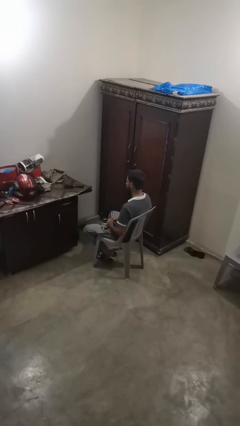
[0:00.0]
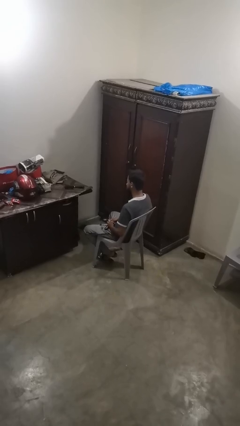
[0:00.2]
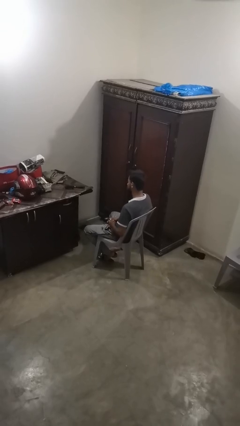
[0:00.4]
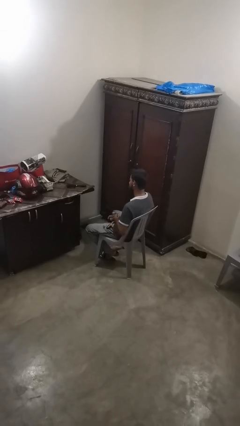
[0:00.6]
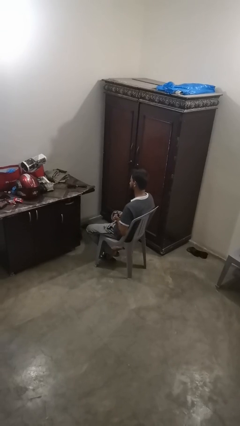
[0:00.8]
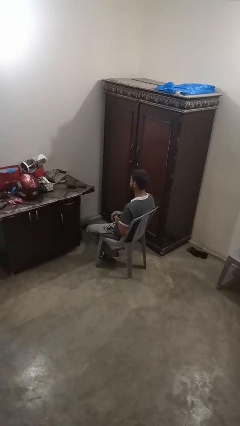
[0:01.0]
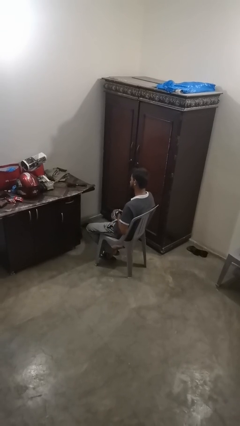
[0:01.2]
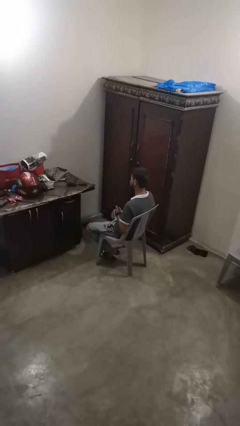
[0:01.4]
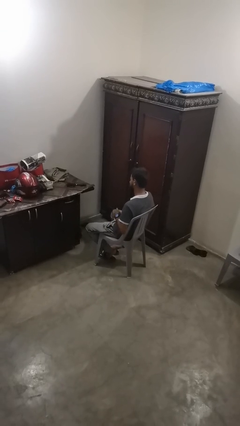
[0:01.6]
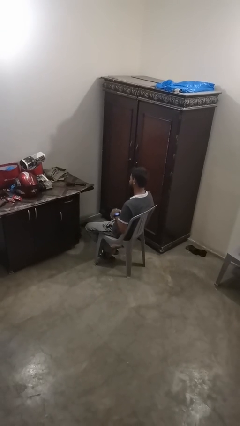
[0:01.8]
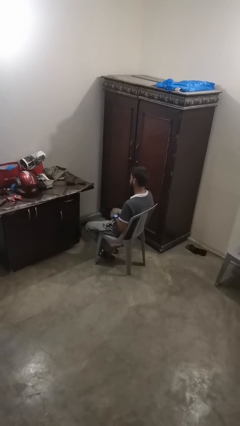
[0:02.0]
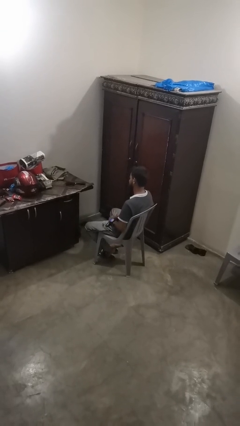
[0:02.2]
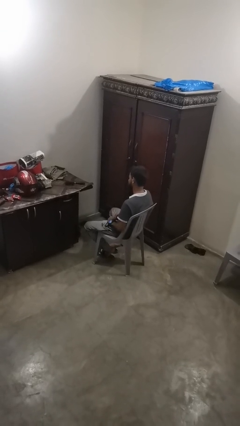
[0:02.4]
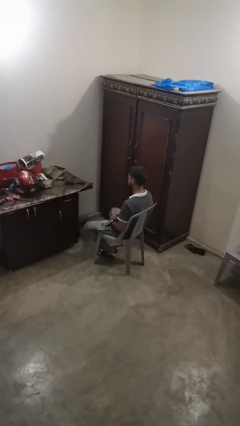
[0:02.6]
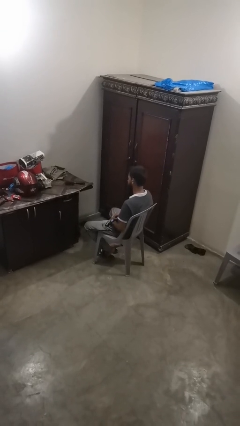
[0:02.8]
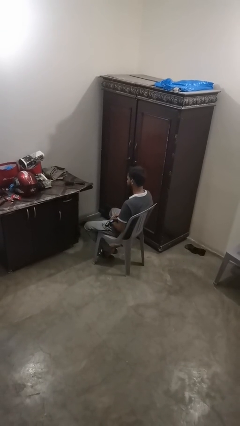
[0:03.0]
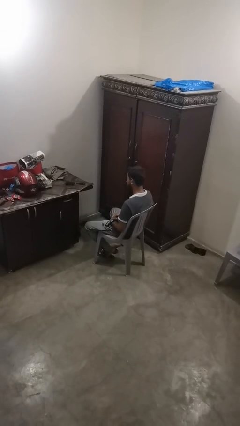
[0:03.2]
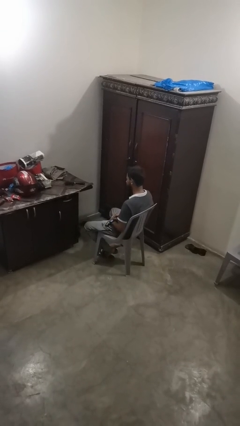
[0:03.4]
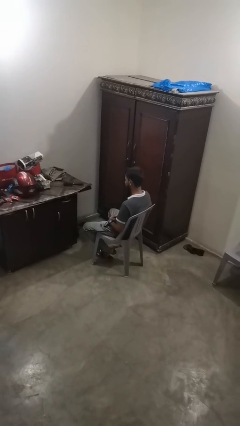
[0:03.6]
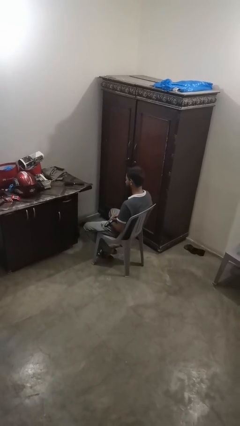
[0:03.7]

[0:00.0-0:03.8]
person puts on wristwatch

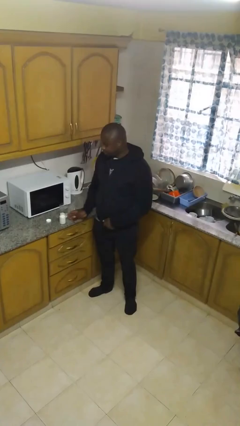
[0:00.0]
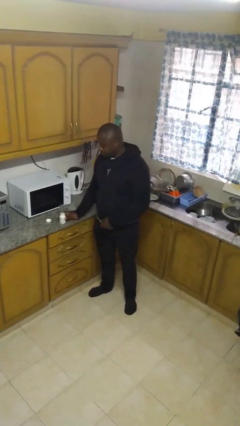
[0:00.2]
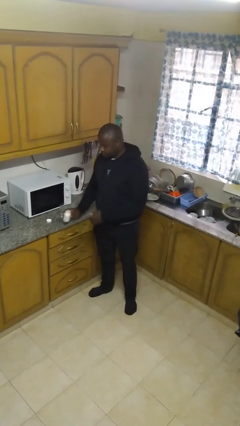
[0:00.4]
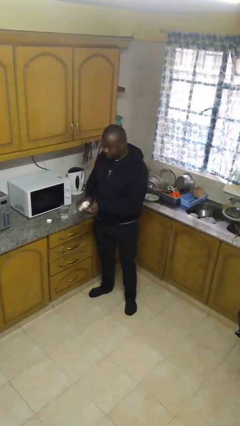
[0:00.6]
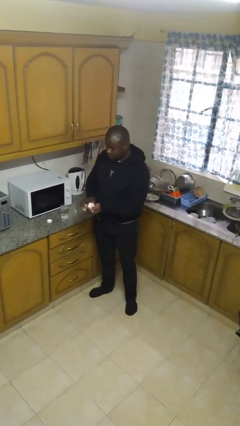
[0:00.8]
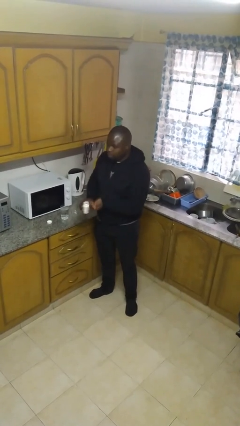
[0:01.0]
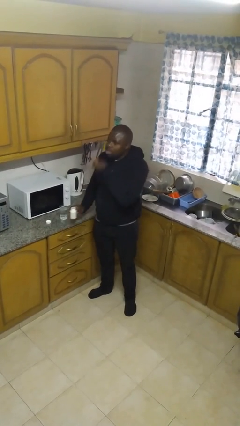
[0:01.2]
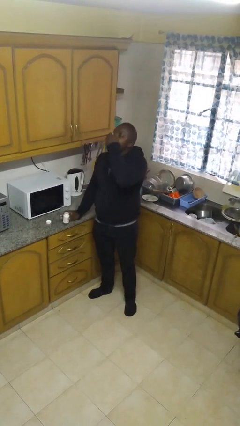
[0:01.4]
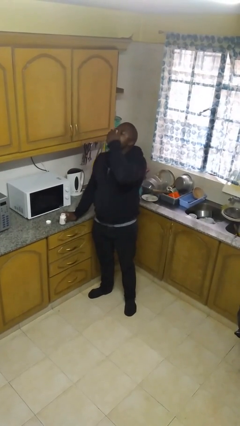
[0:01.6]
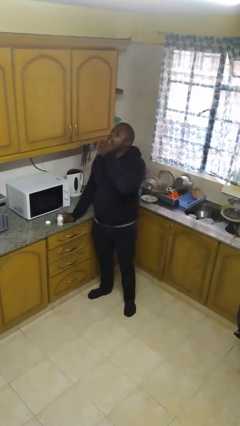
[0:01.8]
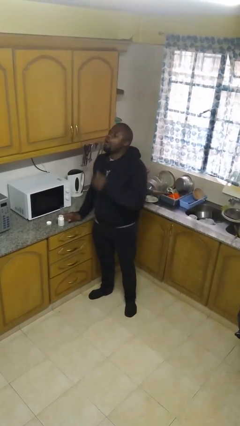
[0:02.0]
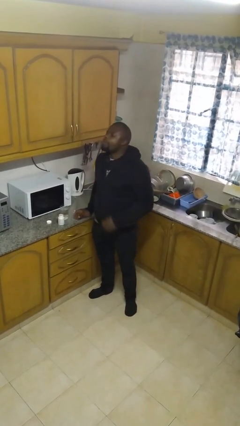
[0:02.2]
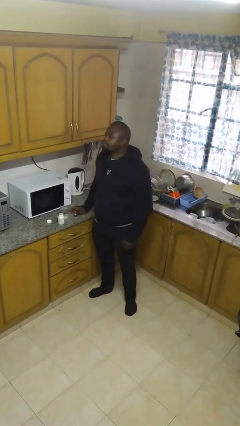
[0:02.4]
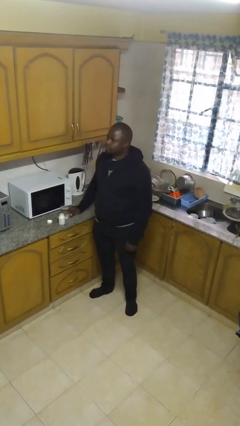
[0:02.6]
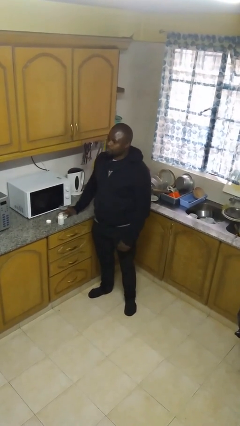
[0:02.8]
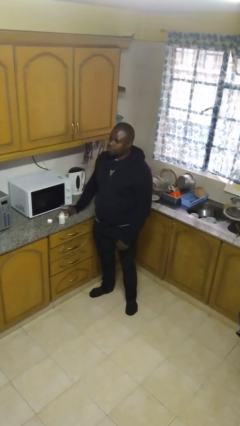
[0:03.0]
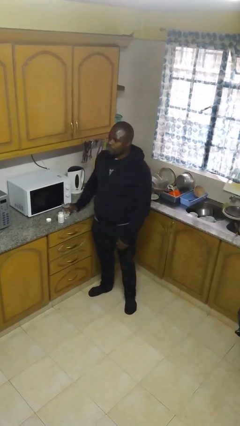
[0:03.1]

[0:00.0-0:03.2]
person takes medicine pills

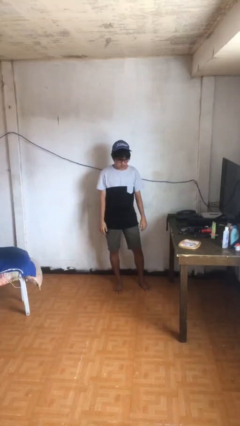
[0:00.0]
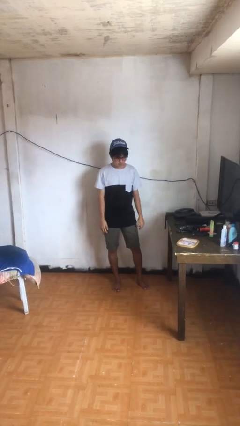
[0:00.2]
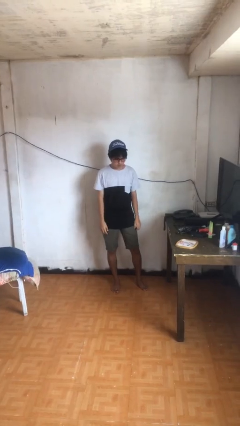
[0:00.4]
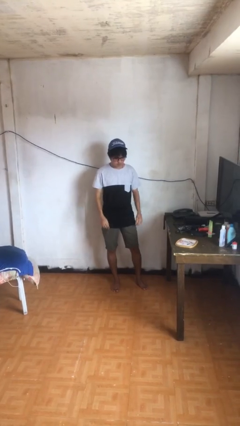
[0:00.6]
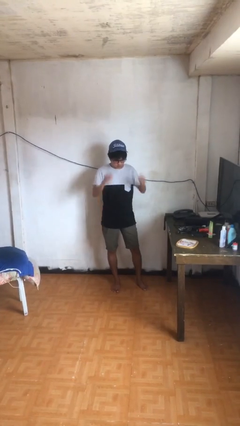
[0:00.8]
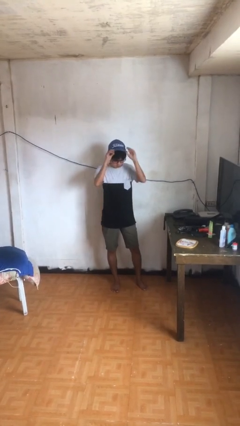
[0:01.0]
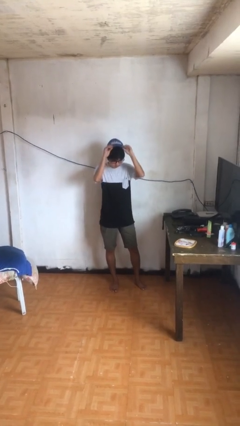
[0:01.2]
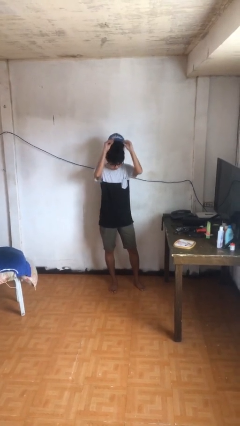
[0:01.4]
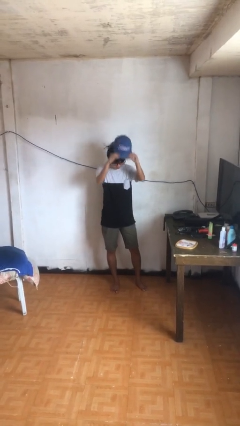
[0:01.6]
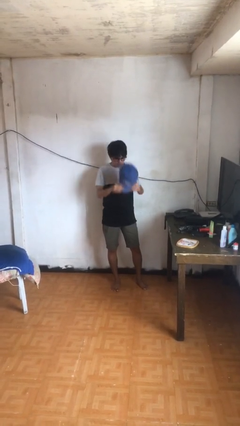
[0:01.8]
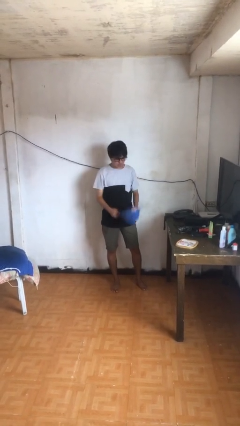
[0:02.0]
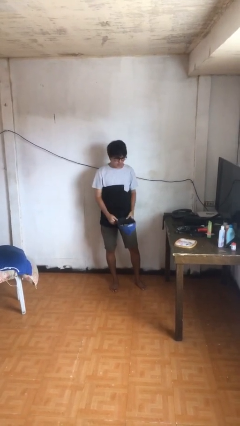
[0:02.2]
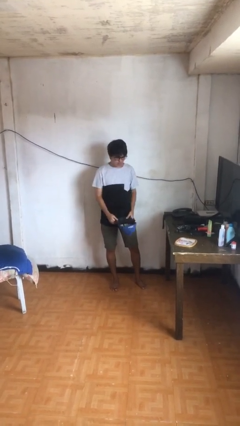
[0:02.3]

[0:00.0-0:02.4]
person takes off hat

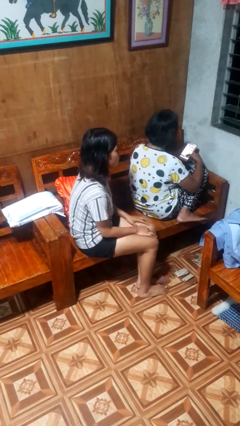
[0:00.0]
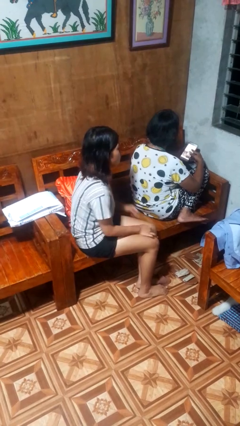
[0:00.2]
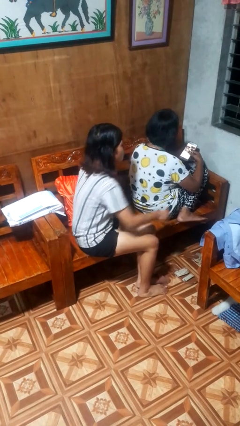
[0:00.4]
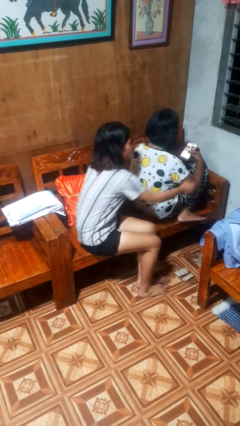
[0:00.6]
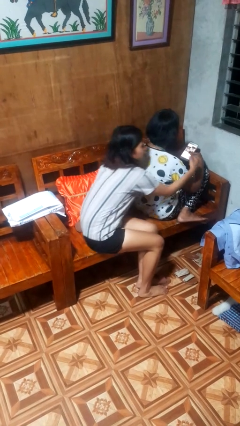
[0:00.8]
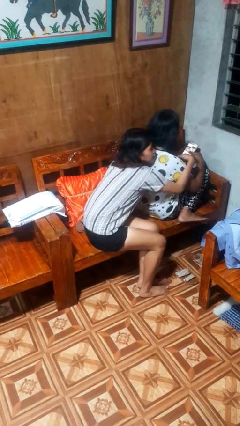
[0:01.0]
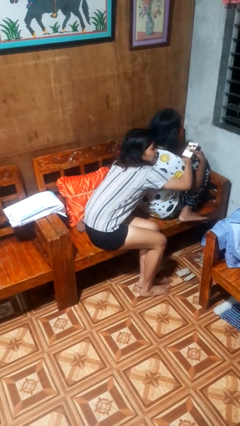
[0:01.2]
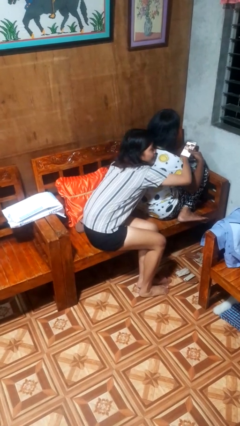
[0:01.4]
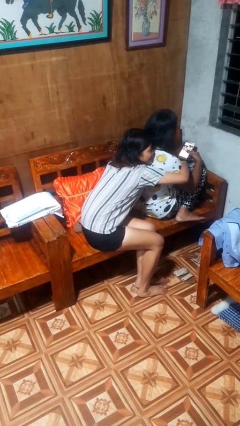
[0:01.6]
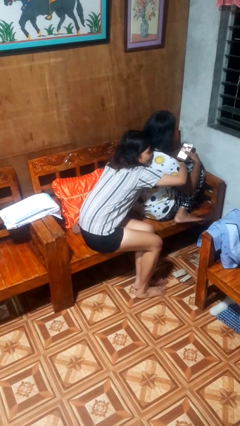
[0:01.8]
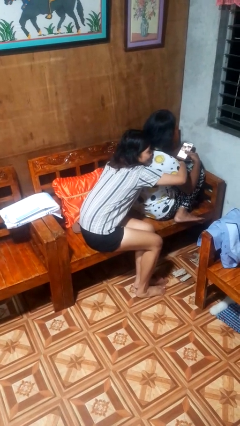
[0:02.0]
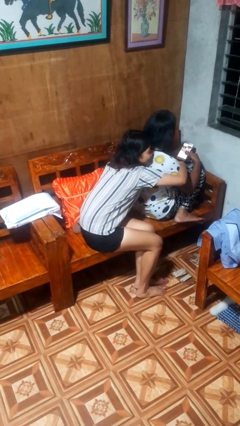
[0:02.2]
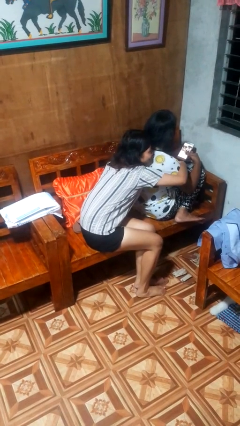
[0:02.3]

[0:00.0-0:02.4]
person hugs person from behind

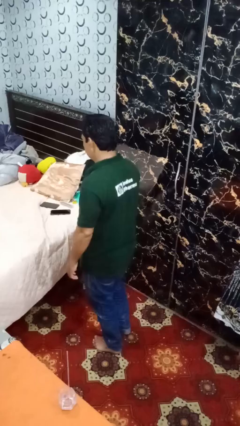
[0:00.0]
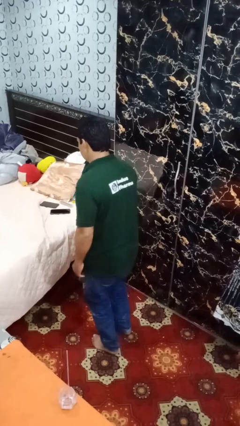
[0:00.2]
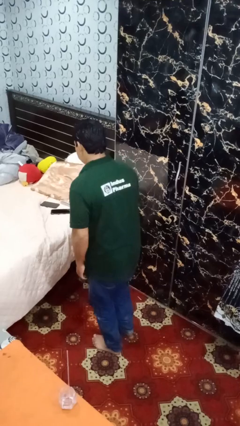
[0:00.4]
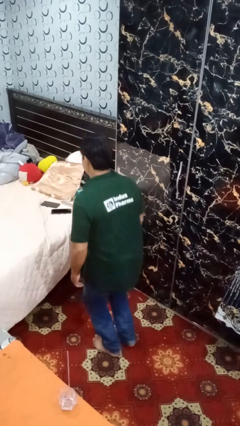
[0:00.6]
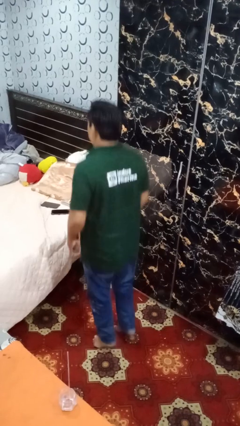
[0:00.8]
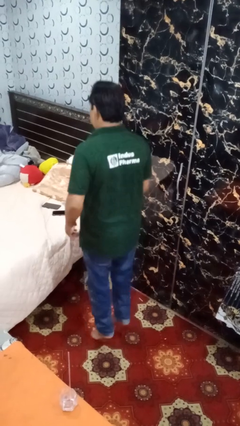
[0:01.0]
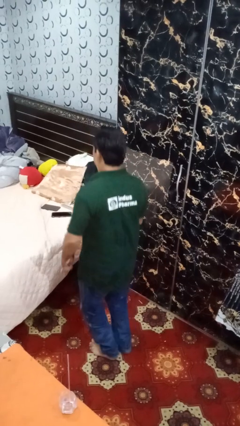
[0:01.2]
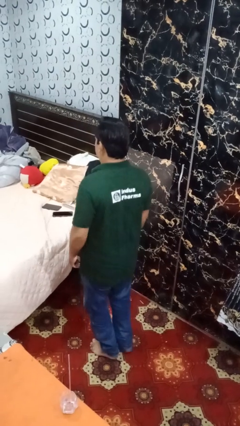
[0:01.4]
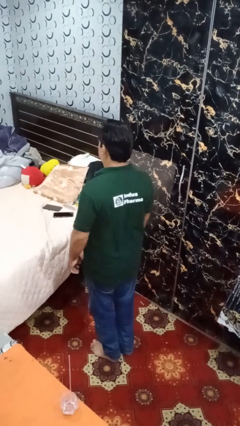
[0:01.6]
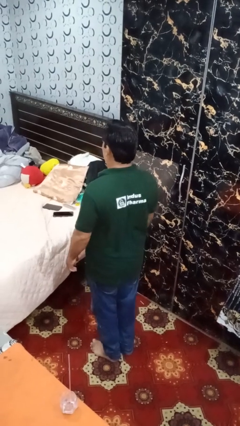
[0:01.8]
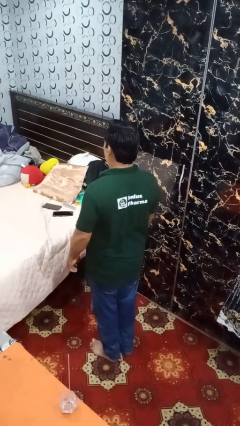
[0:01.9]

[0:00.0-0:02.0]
person jumps

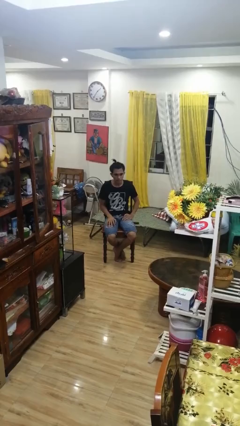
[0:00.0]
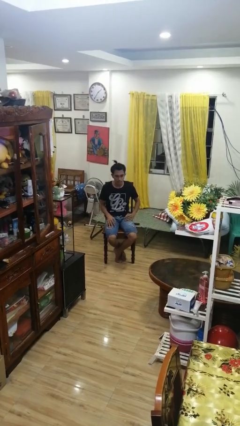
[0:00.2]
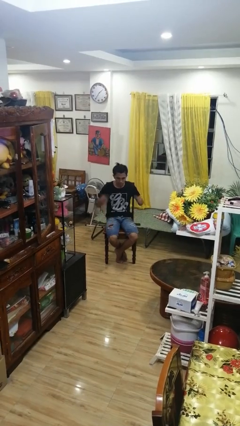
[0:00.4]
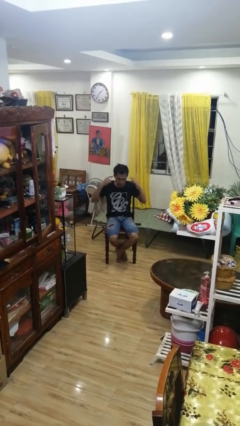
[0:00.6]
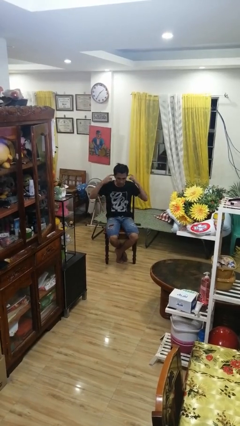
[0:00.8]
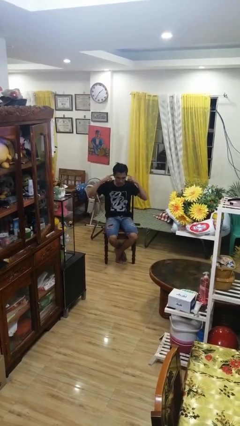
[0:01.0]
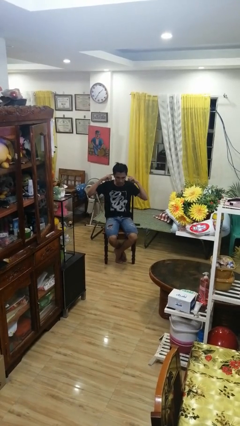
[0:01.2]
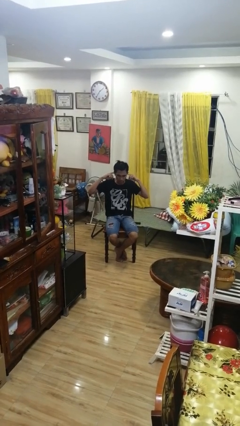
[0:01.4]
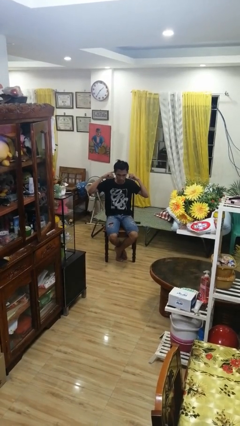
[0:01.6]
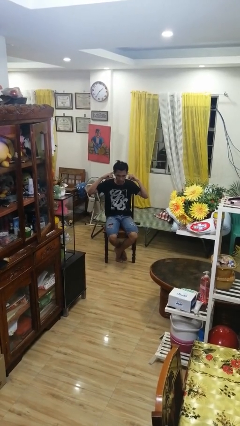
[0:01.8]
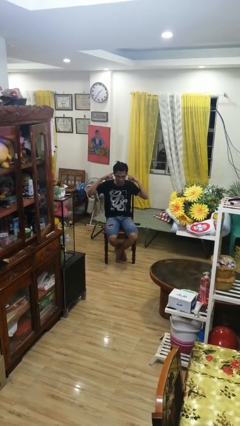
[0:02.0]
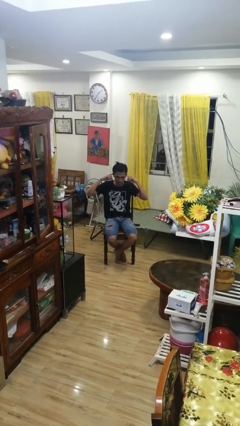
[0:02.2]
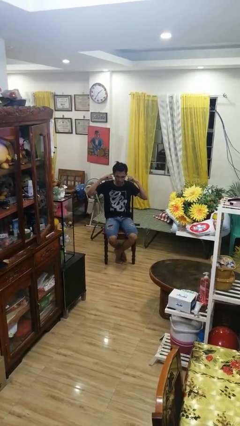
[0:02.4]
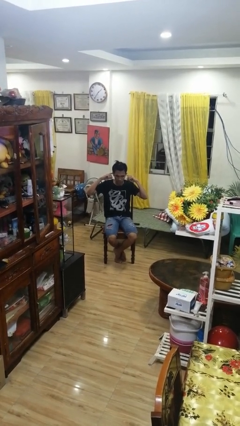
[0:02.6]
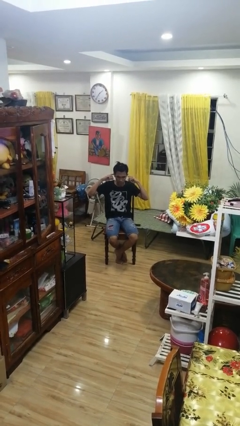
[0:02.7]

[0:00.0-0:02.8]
person puts fingers in ear

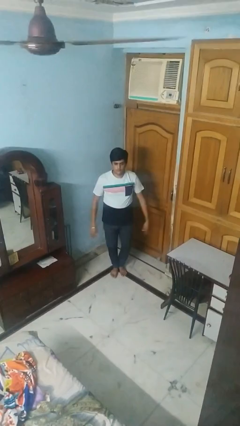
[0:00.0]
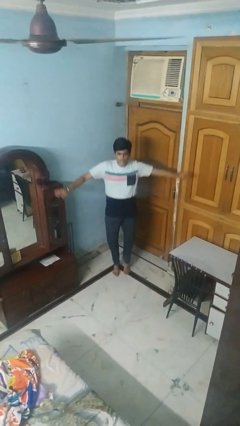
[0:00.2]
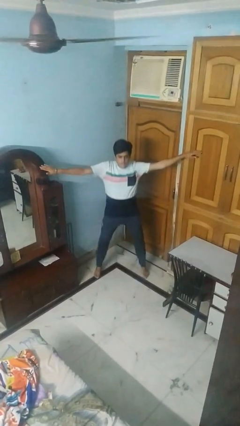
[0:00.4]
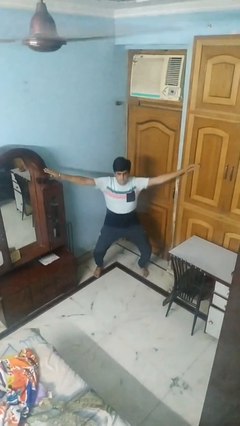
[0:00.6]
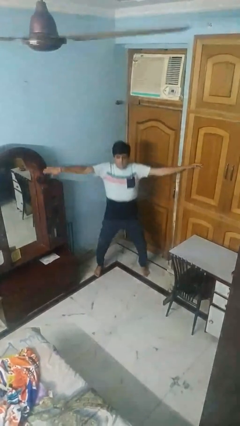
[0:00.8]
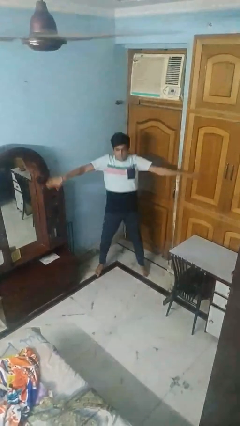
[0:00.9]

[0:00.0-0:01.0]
person exercises with jumping jacks
